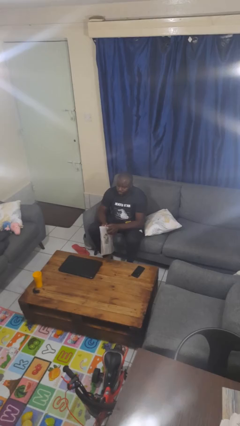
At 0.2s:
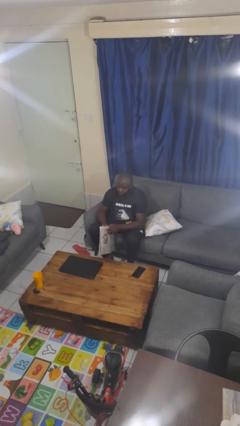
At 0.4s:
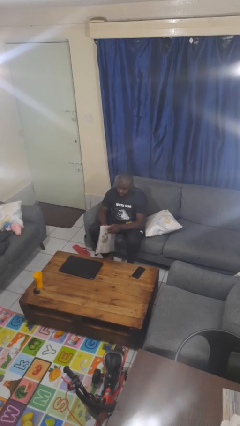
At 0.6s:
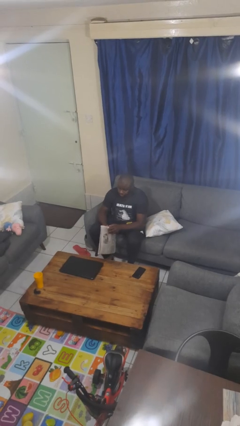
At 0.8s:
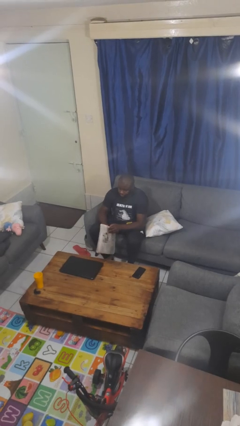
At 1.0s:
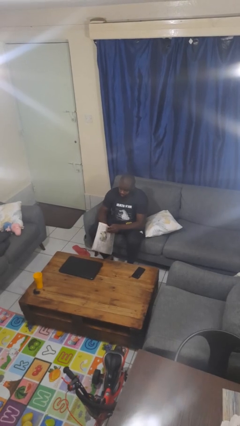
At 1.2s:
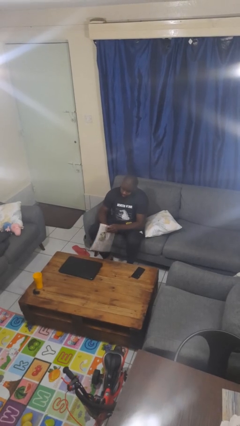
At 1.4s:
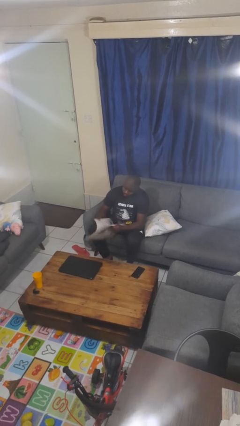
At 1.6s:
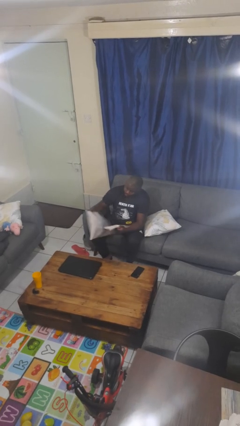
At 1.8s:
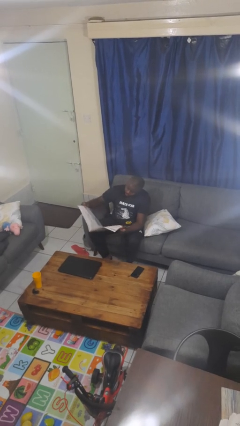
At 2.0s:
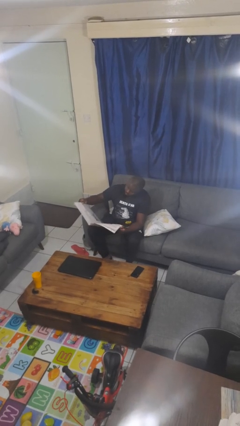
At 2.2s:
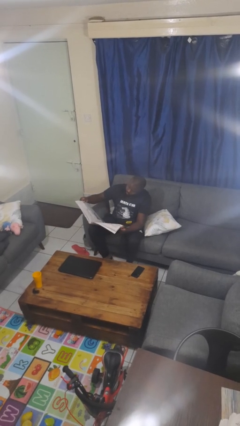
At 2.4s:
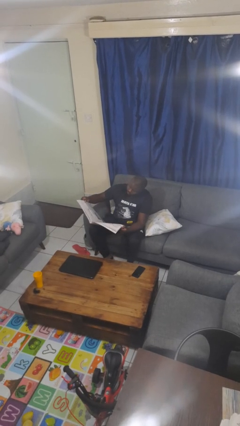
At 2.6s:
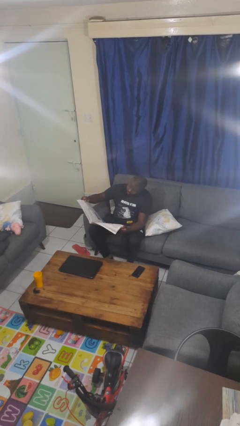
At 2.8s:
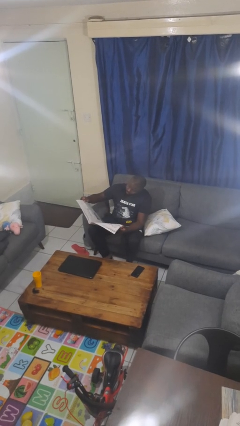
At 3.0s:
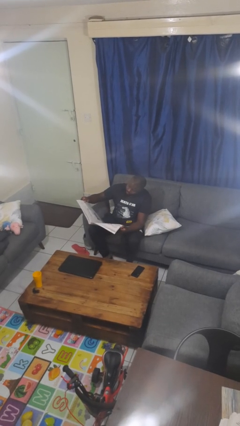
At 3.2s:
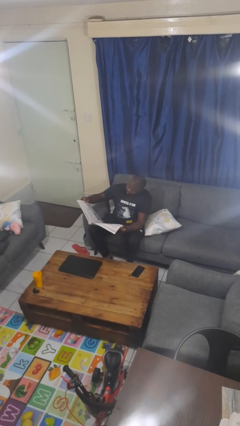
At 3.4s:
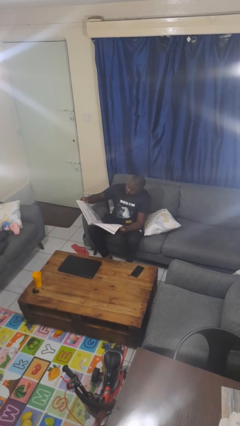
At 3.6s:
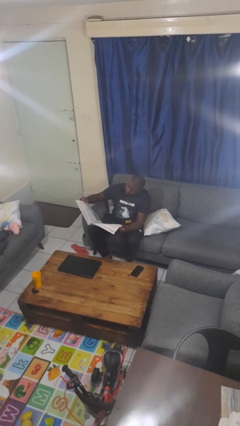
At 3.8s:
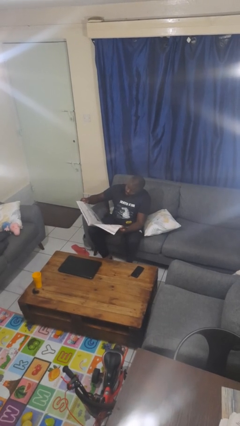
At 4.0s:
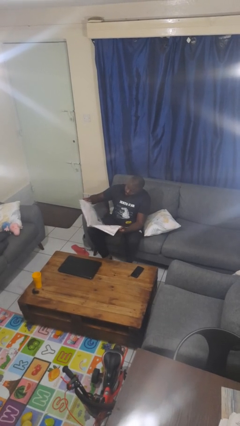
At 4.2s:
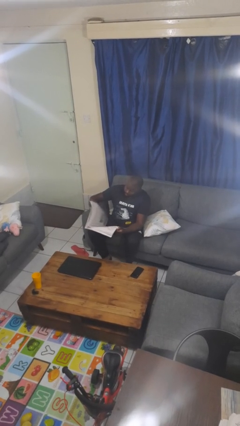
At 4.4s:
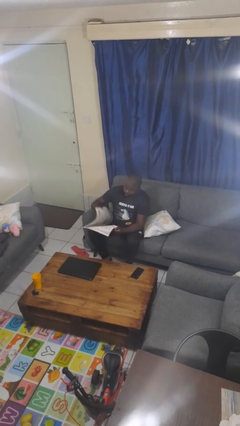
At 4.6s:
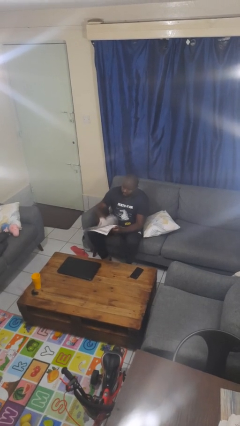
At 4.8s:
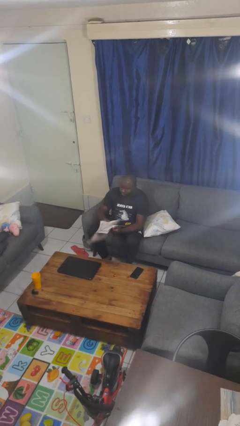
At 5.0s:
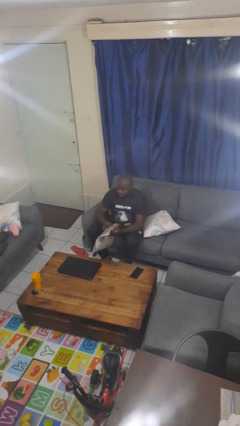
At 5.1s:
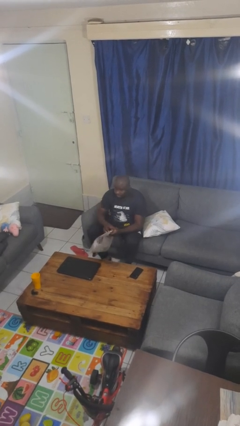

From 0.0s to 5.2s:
person reads newspaper

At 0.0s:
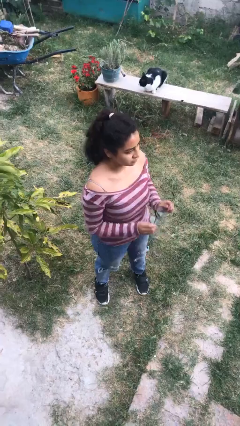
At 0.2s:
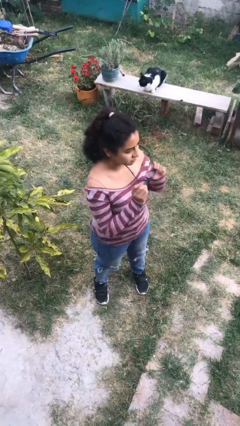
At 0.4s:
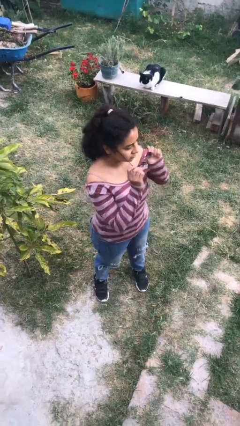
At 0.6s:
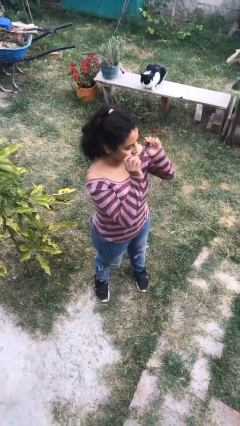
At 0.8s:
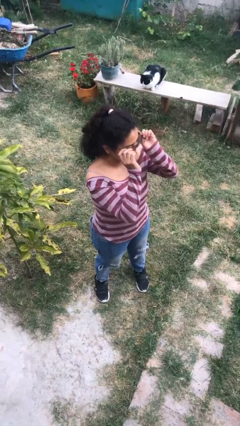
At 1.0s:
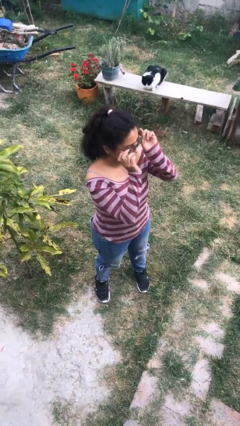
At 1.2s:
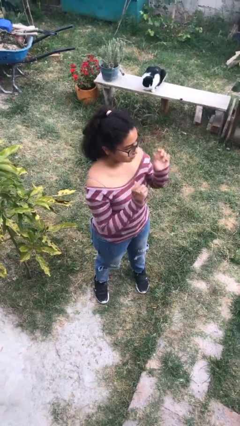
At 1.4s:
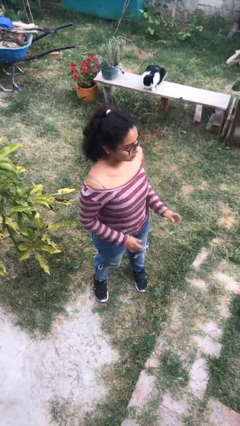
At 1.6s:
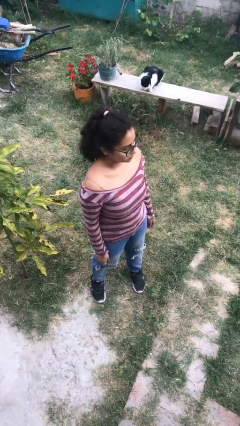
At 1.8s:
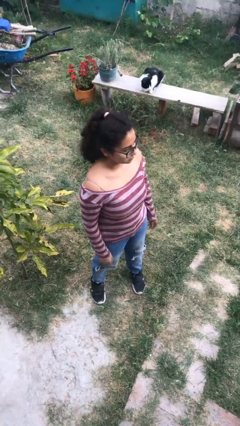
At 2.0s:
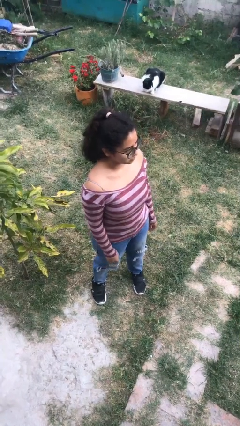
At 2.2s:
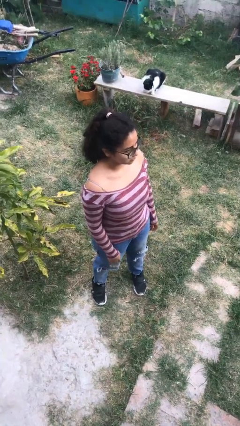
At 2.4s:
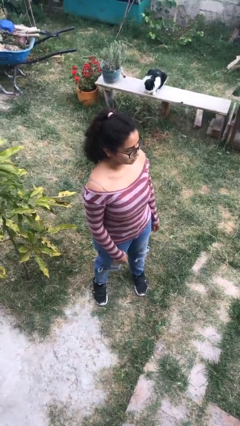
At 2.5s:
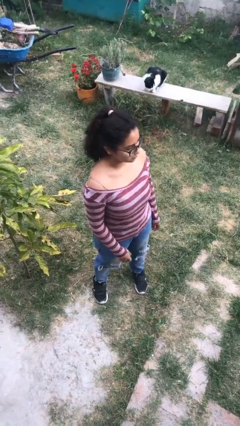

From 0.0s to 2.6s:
person puts on glasses

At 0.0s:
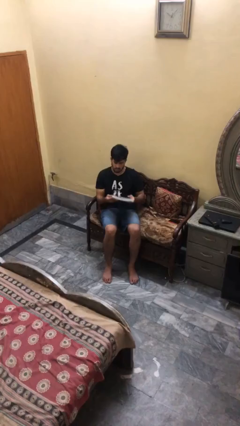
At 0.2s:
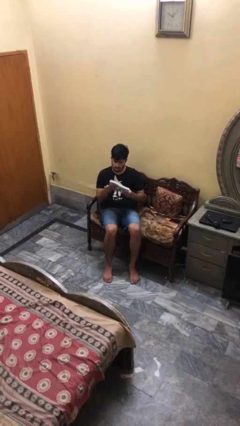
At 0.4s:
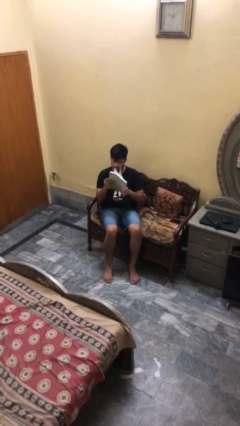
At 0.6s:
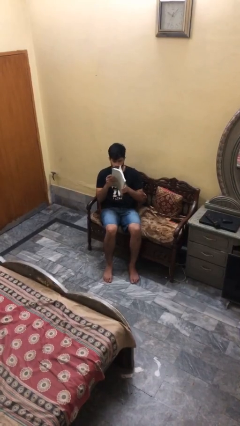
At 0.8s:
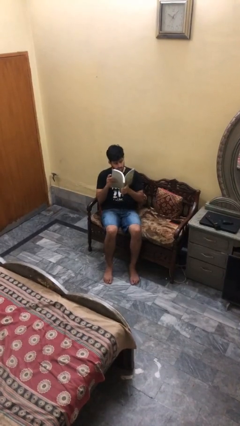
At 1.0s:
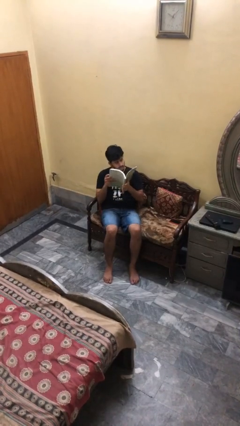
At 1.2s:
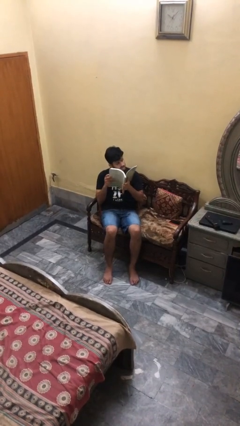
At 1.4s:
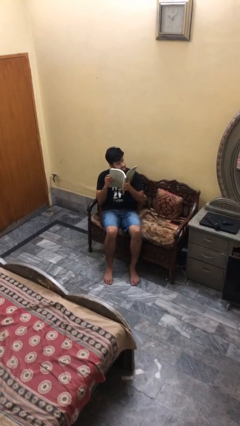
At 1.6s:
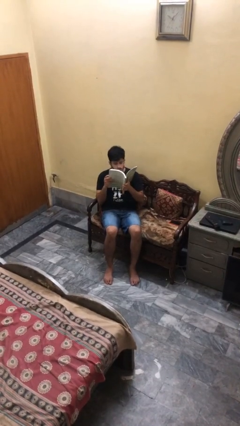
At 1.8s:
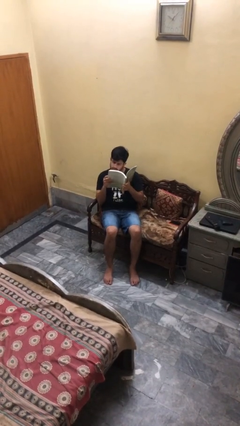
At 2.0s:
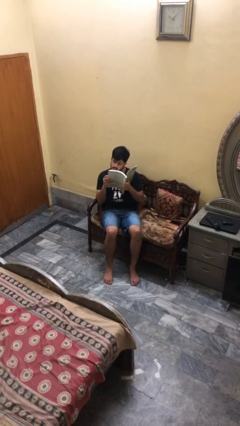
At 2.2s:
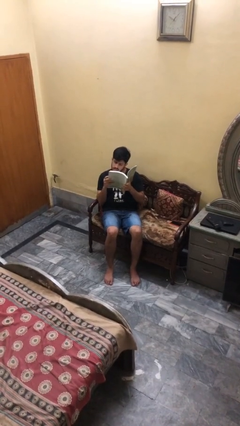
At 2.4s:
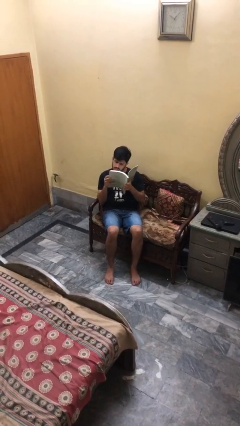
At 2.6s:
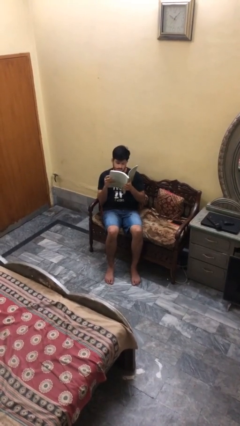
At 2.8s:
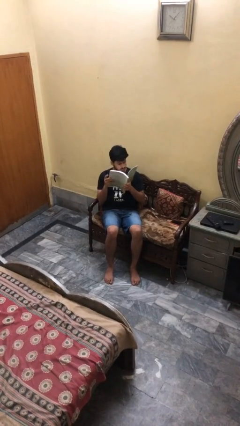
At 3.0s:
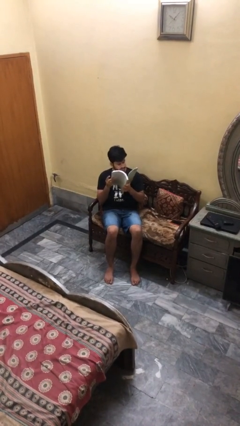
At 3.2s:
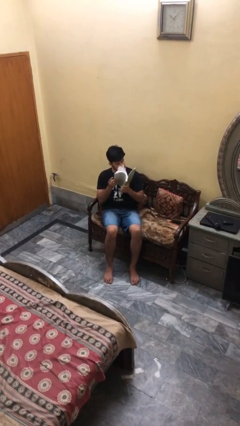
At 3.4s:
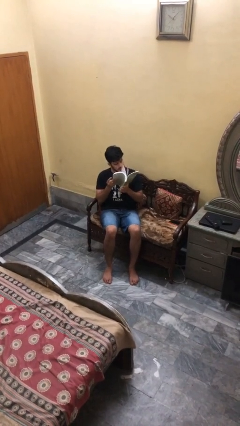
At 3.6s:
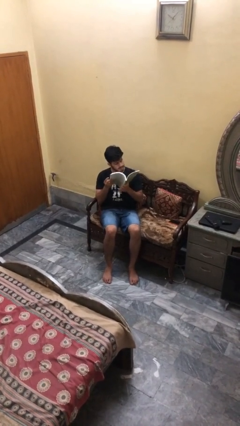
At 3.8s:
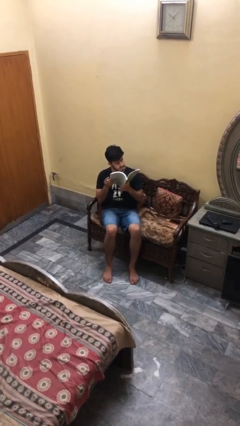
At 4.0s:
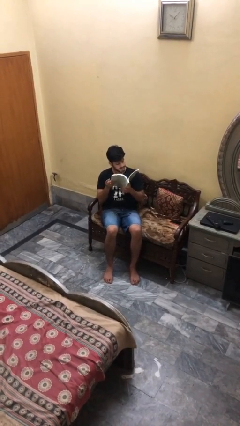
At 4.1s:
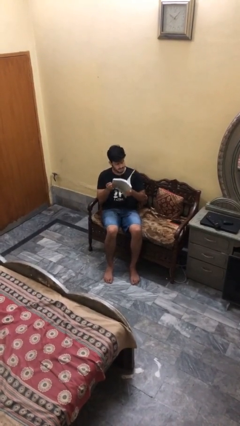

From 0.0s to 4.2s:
person reads book

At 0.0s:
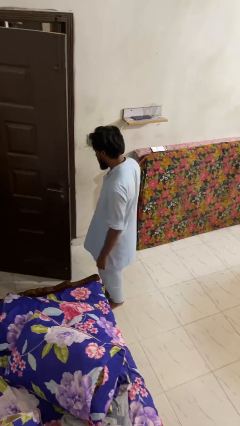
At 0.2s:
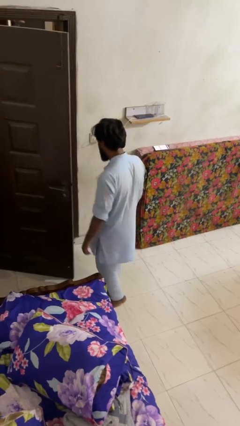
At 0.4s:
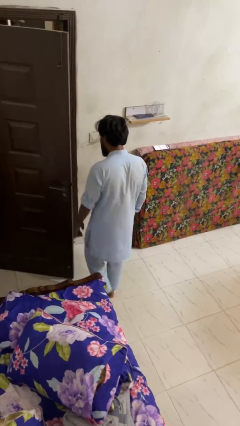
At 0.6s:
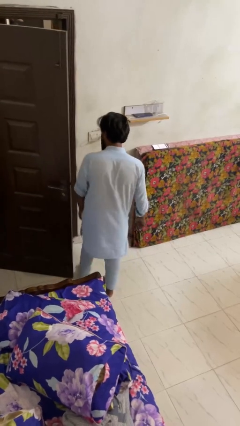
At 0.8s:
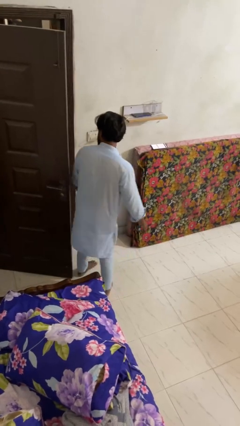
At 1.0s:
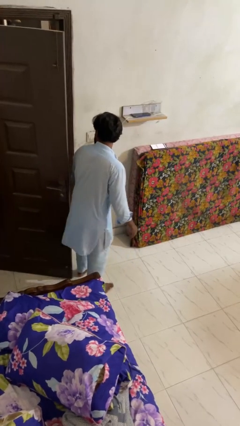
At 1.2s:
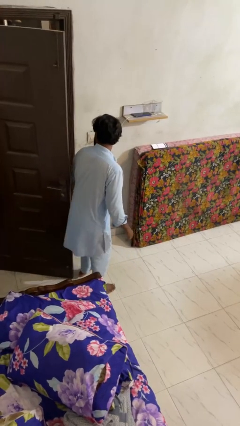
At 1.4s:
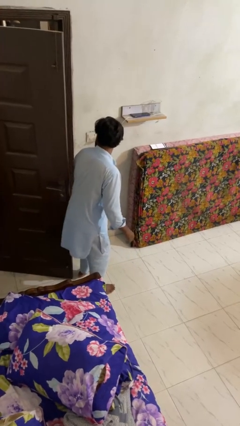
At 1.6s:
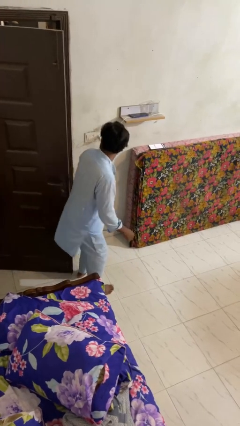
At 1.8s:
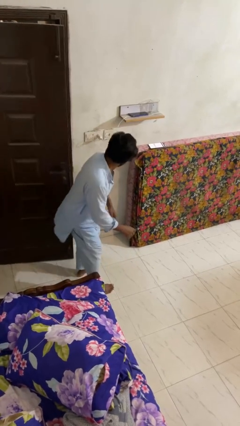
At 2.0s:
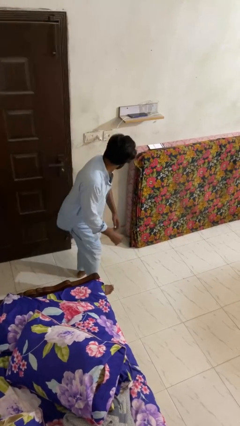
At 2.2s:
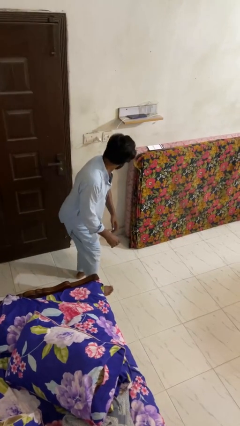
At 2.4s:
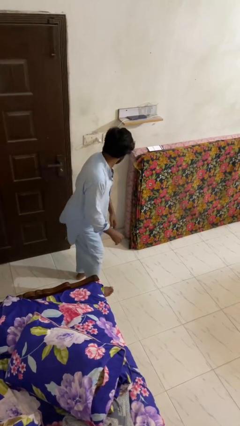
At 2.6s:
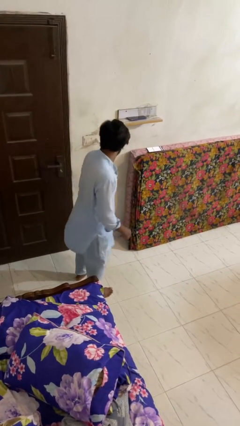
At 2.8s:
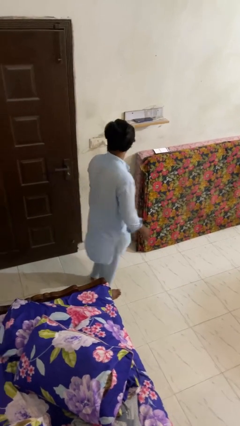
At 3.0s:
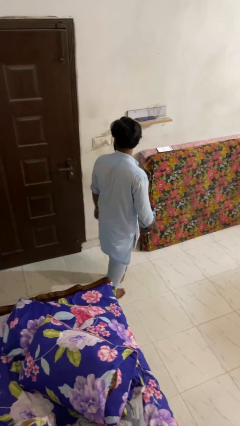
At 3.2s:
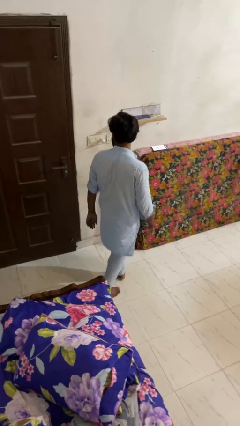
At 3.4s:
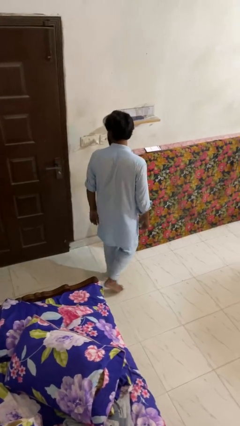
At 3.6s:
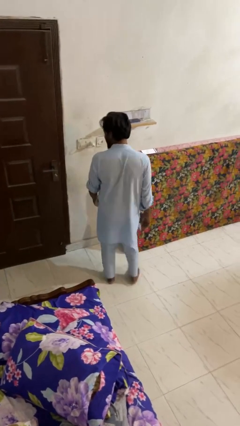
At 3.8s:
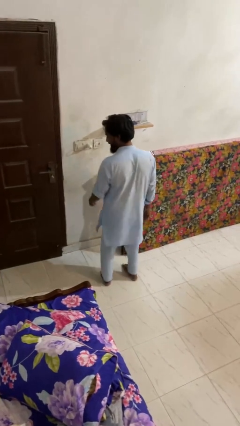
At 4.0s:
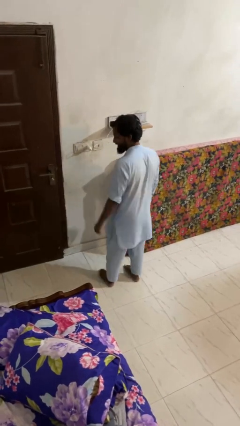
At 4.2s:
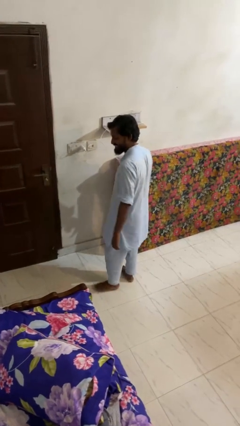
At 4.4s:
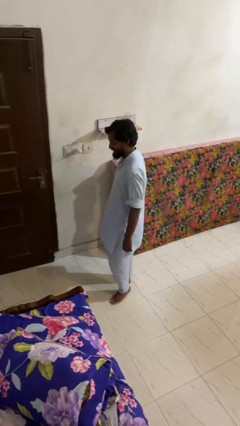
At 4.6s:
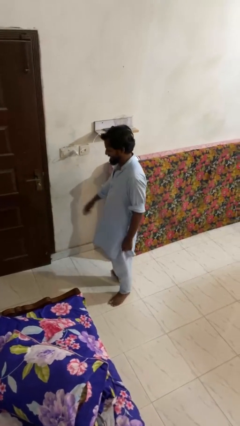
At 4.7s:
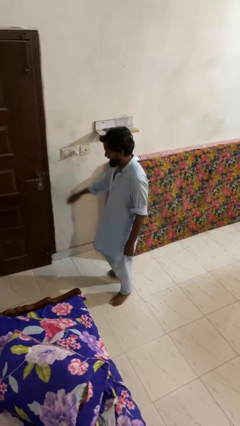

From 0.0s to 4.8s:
person closes door with hip

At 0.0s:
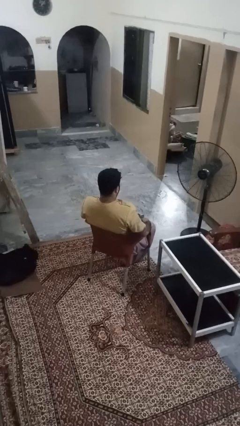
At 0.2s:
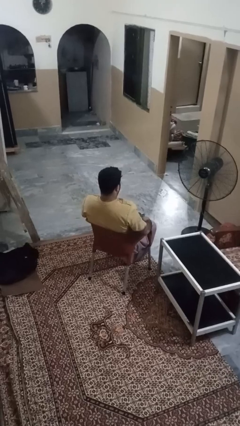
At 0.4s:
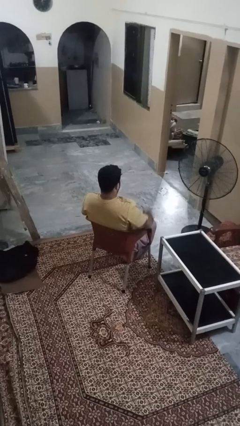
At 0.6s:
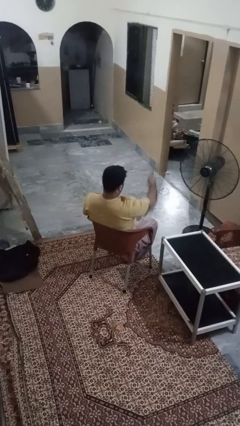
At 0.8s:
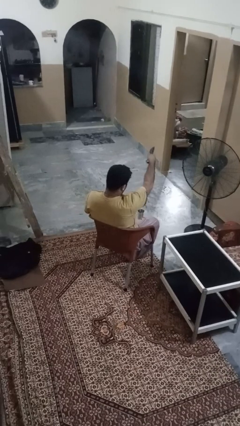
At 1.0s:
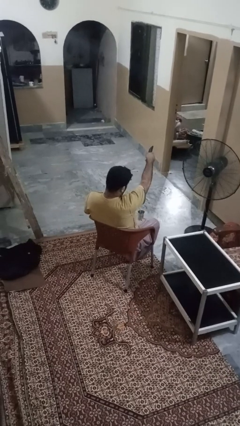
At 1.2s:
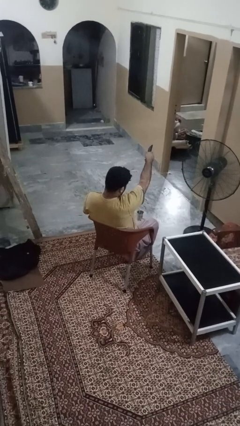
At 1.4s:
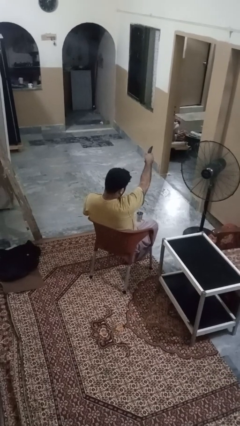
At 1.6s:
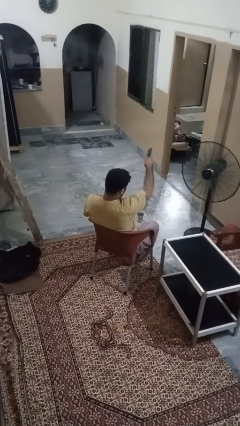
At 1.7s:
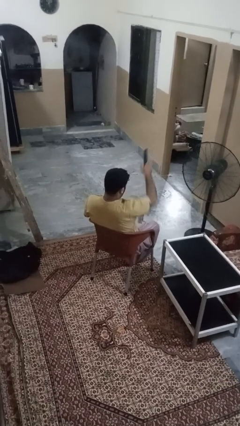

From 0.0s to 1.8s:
person uses television remote
